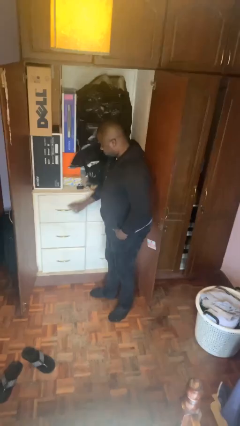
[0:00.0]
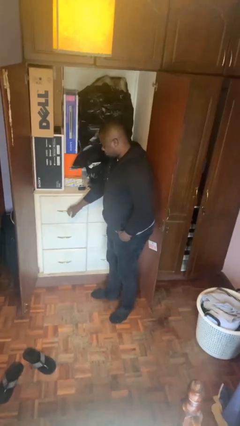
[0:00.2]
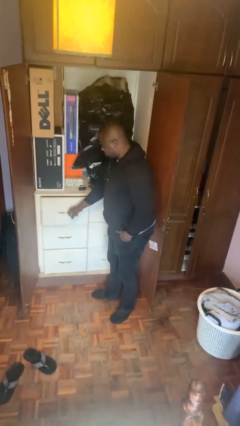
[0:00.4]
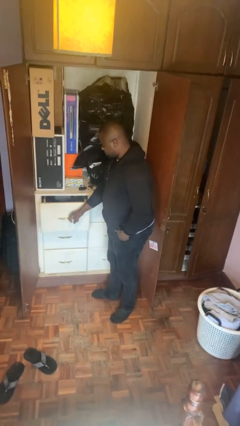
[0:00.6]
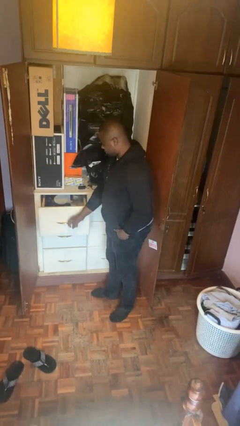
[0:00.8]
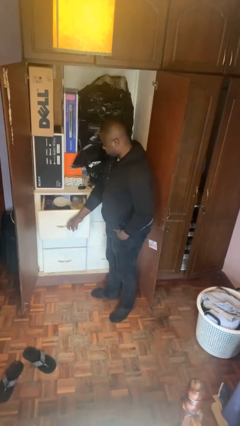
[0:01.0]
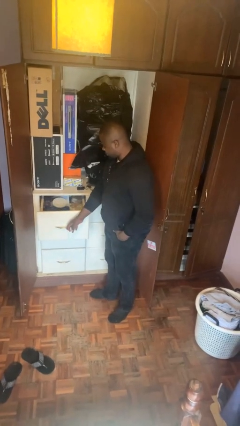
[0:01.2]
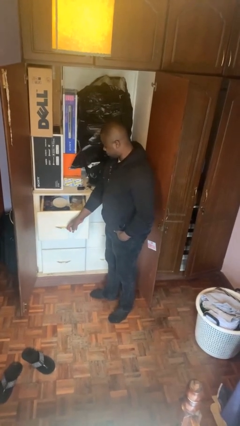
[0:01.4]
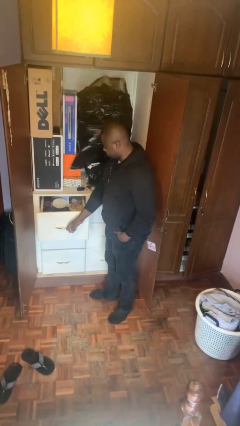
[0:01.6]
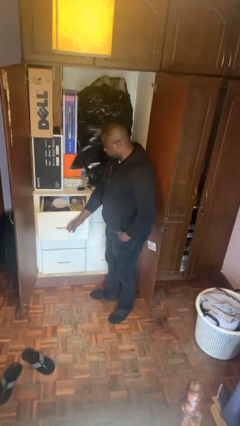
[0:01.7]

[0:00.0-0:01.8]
person opens dresser drawer

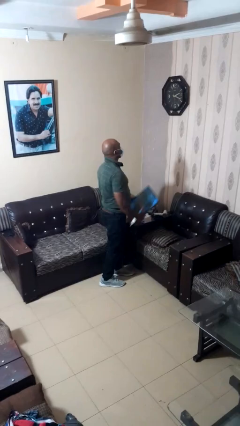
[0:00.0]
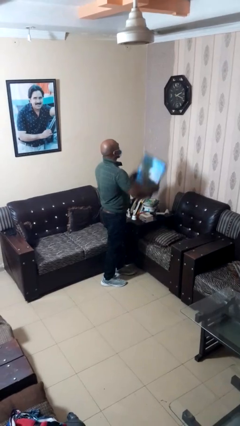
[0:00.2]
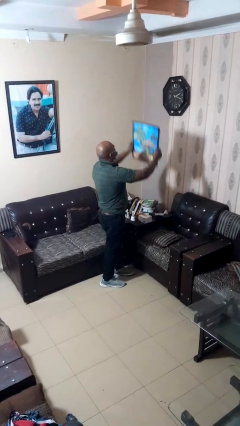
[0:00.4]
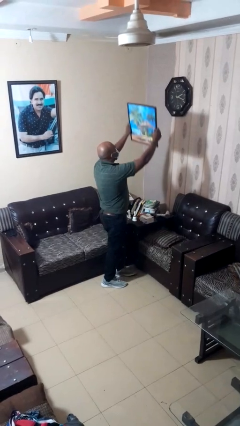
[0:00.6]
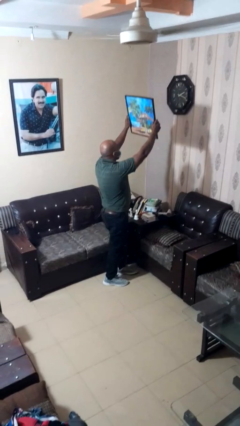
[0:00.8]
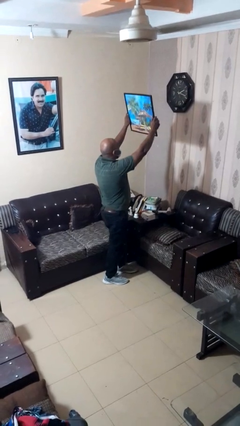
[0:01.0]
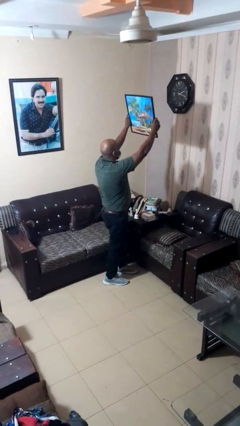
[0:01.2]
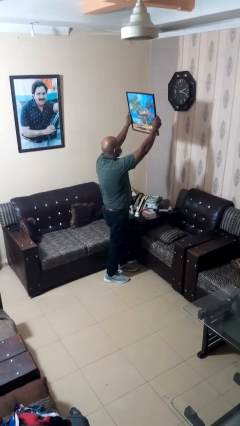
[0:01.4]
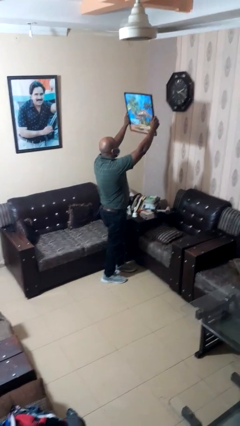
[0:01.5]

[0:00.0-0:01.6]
person holds object above head

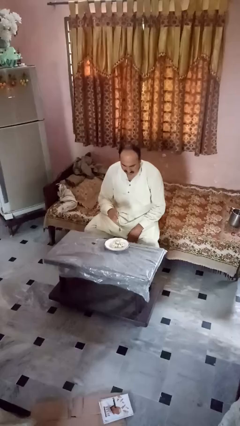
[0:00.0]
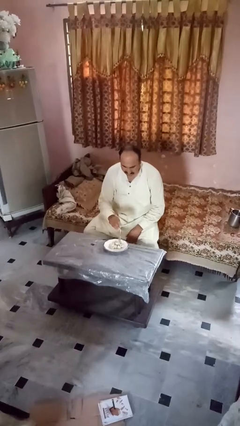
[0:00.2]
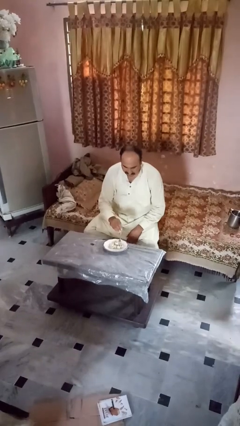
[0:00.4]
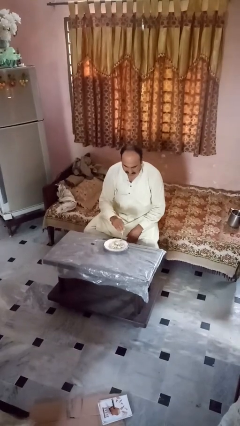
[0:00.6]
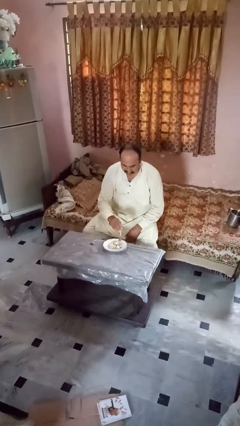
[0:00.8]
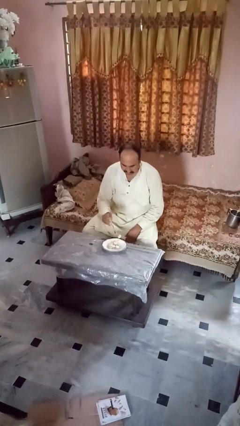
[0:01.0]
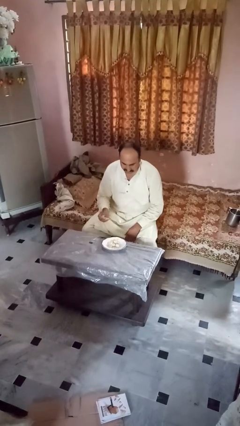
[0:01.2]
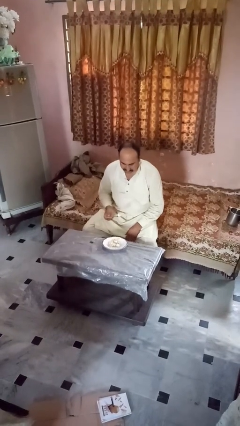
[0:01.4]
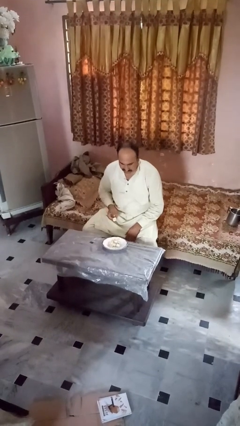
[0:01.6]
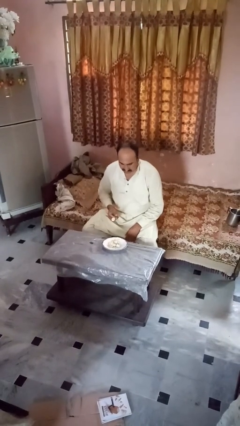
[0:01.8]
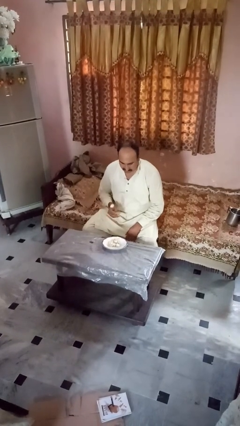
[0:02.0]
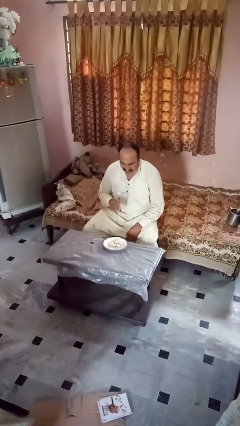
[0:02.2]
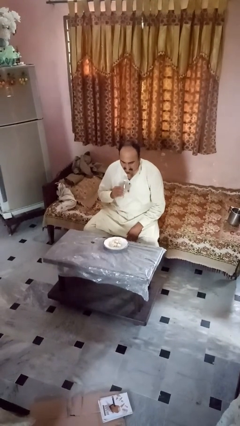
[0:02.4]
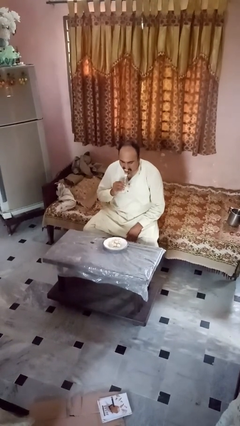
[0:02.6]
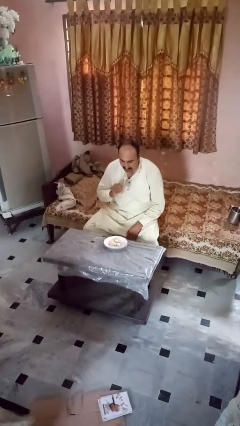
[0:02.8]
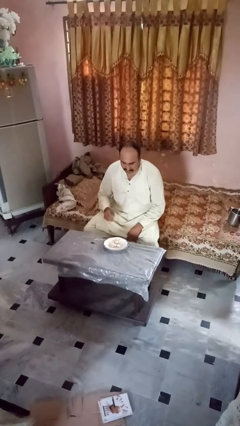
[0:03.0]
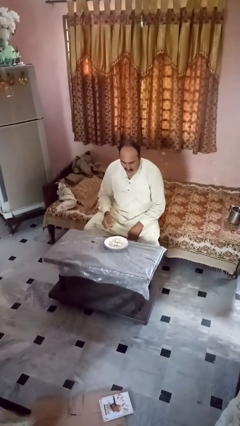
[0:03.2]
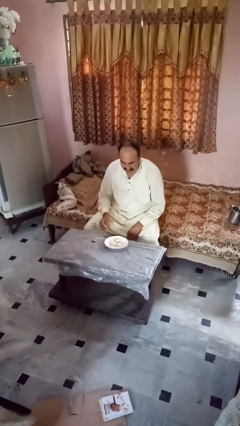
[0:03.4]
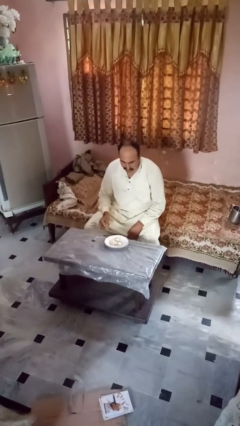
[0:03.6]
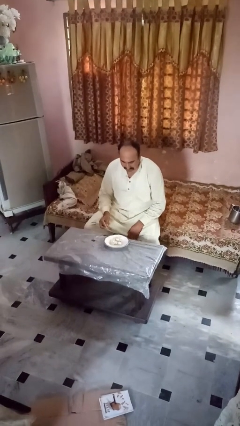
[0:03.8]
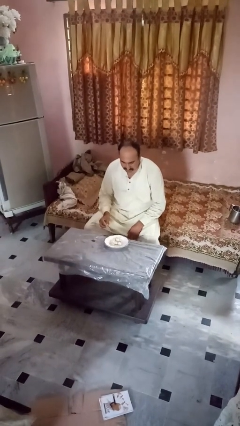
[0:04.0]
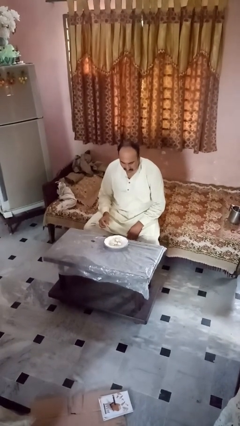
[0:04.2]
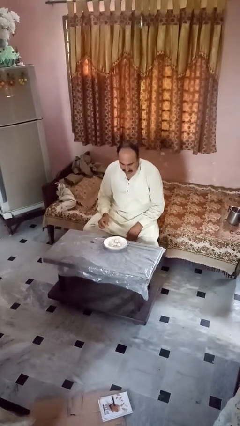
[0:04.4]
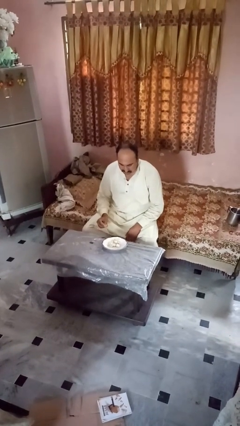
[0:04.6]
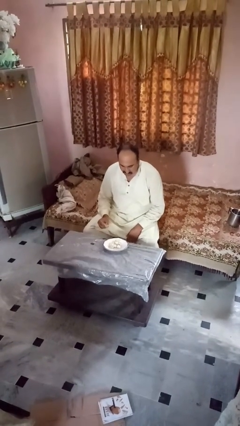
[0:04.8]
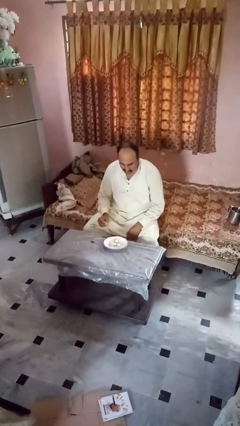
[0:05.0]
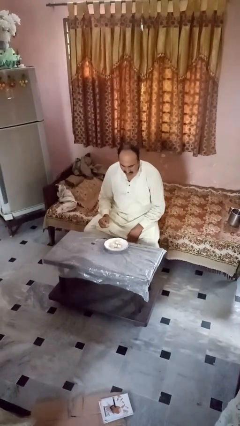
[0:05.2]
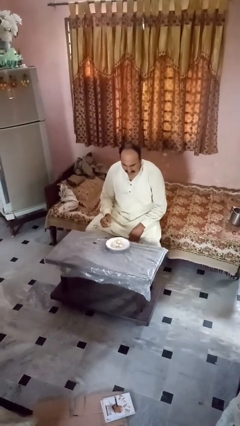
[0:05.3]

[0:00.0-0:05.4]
person eats with utensil

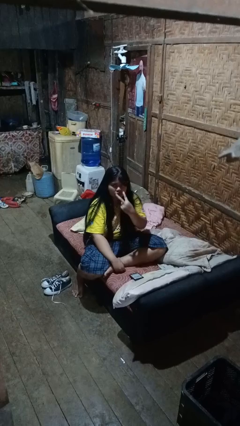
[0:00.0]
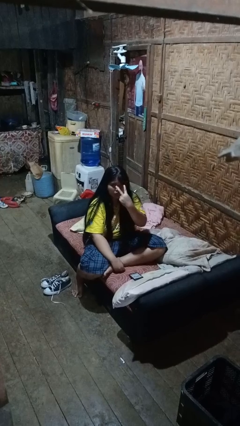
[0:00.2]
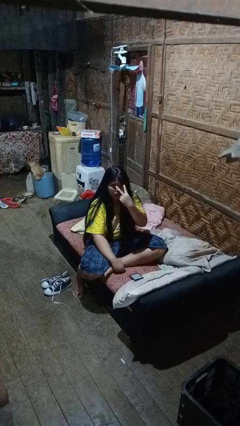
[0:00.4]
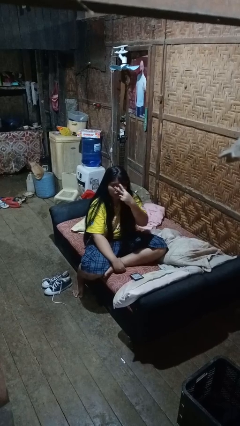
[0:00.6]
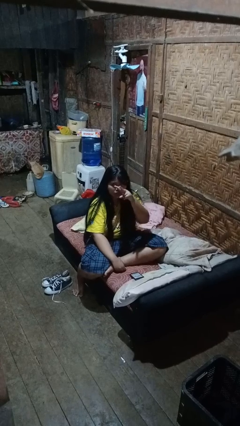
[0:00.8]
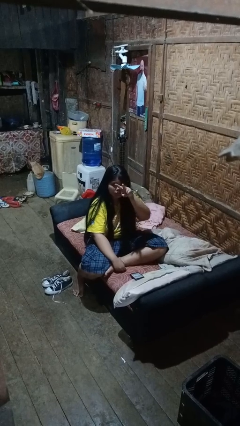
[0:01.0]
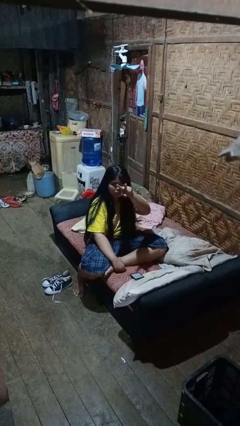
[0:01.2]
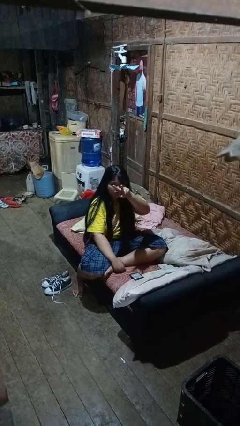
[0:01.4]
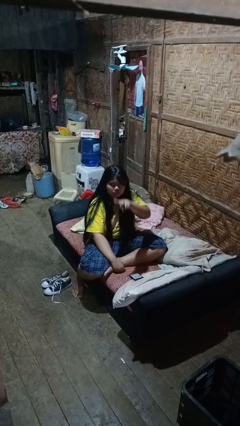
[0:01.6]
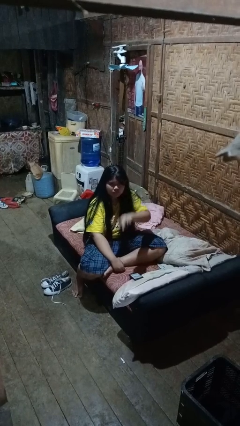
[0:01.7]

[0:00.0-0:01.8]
person gestures watch closely

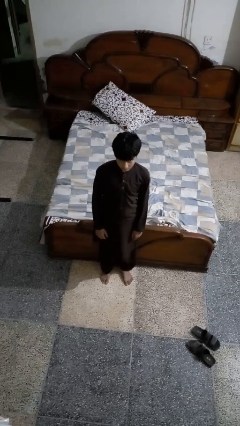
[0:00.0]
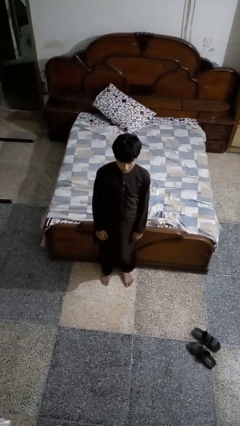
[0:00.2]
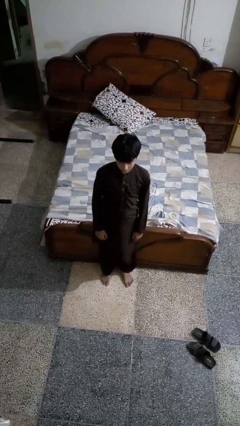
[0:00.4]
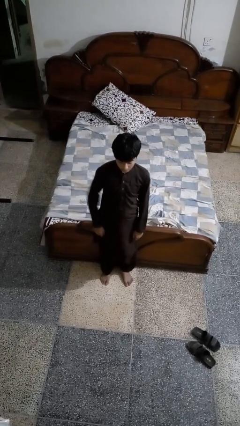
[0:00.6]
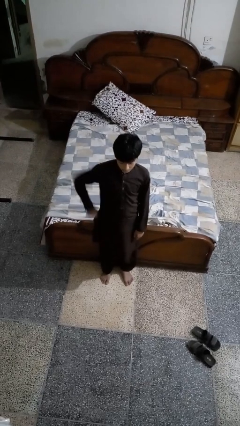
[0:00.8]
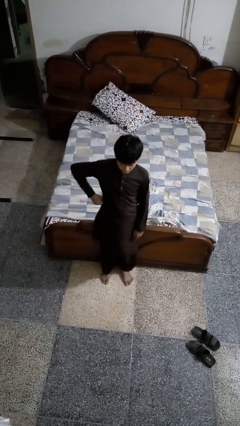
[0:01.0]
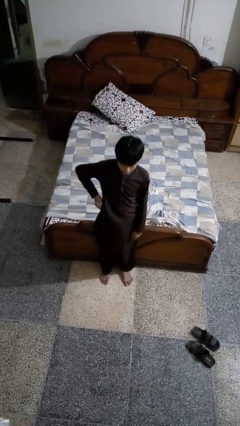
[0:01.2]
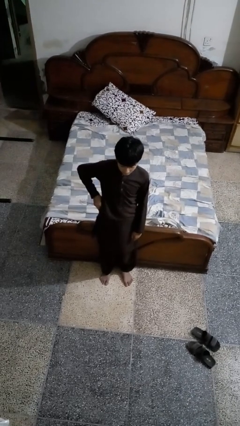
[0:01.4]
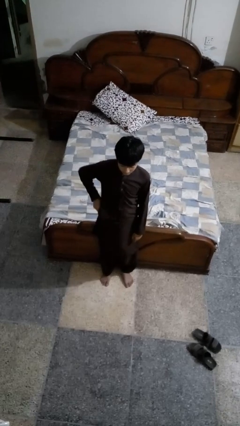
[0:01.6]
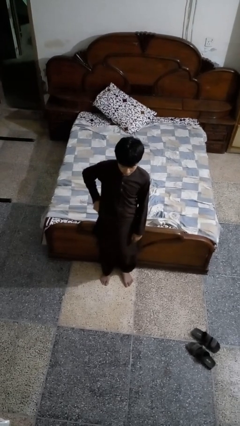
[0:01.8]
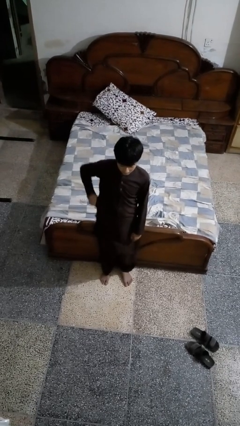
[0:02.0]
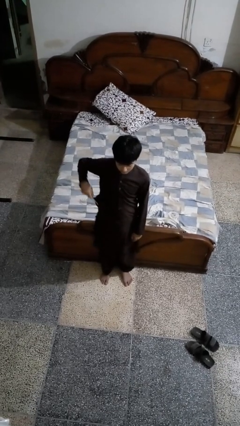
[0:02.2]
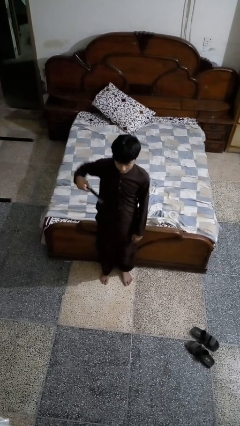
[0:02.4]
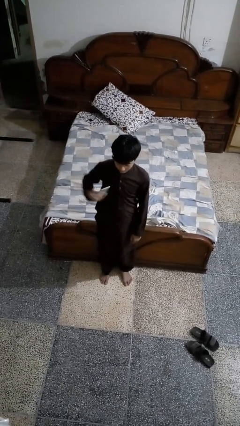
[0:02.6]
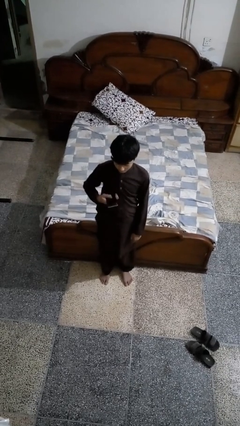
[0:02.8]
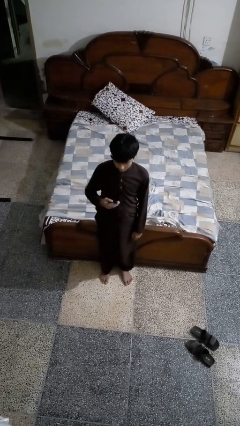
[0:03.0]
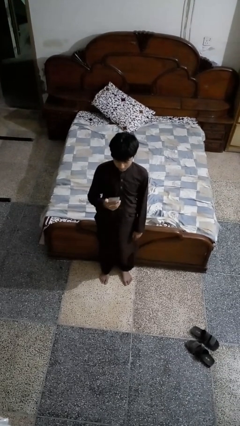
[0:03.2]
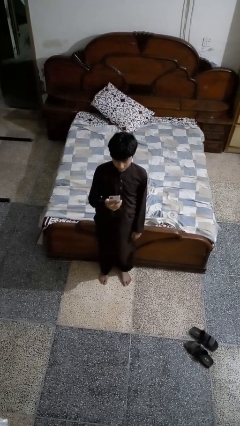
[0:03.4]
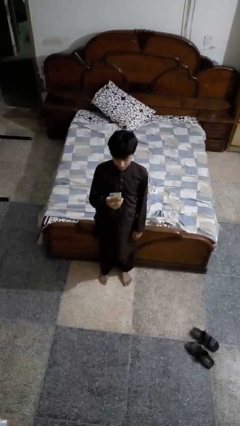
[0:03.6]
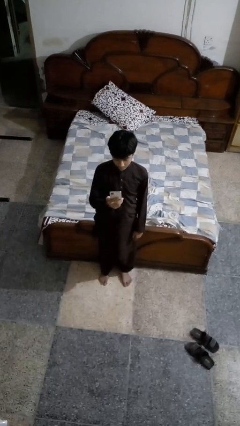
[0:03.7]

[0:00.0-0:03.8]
person takes phone from pocket

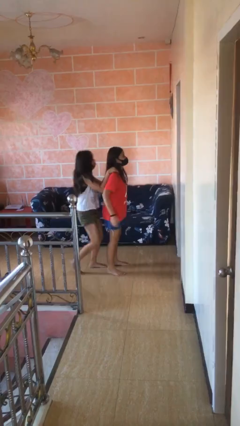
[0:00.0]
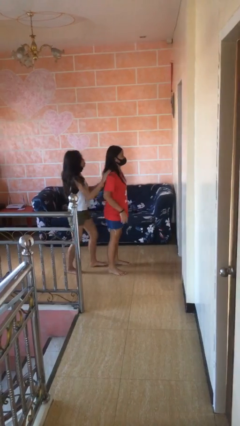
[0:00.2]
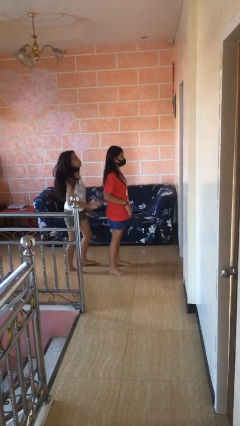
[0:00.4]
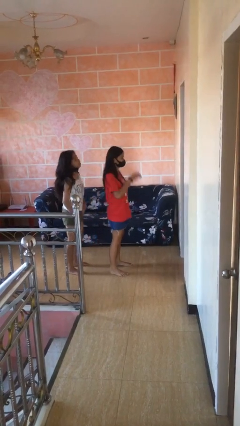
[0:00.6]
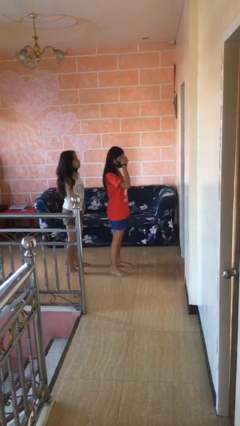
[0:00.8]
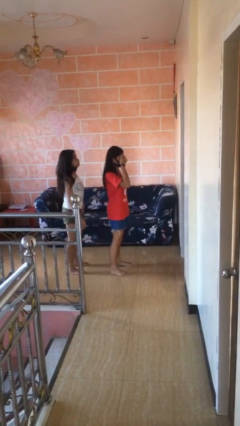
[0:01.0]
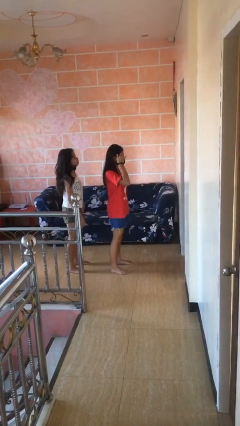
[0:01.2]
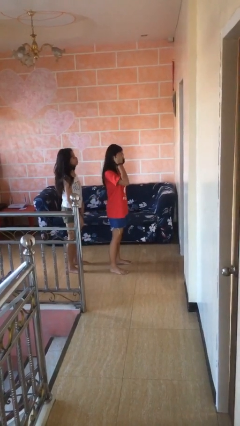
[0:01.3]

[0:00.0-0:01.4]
person puts down person

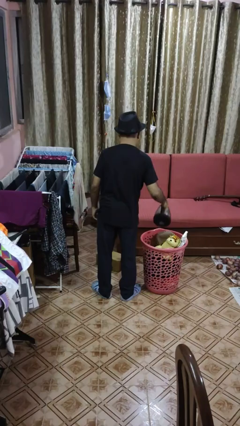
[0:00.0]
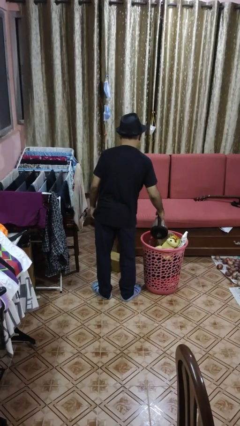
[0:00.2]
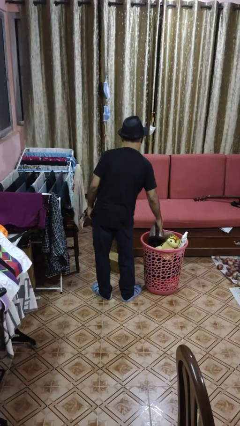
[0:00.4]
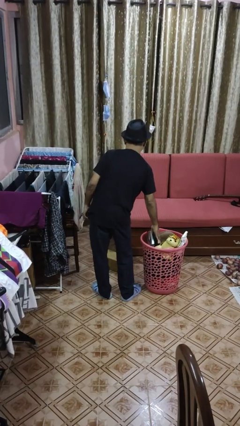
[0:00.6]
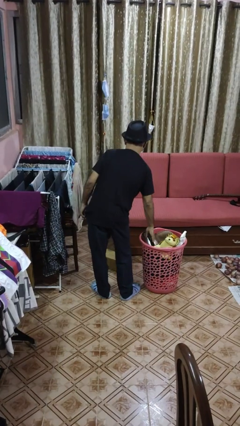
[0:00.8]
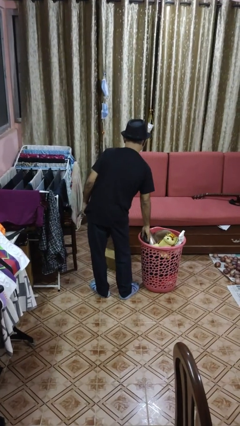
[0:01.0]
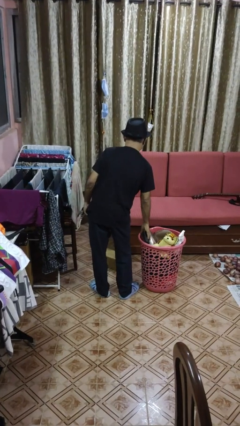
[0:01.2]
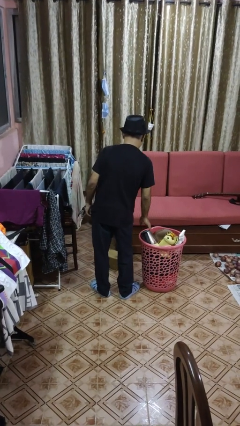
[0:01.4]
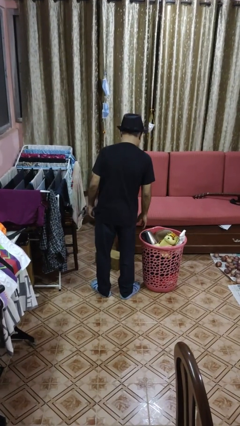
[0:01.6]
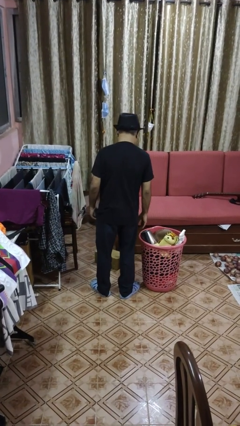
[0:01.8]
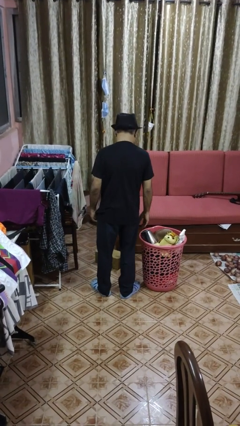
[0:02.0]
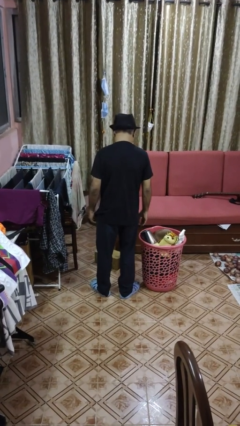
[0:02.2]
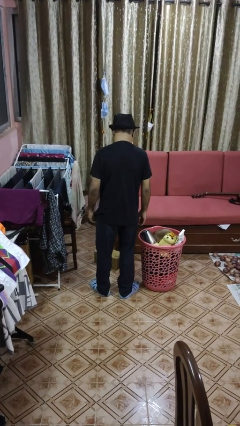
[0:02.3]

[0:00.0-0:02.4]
person puts object into basket
